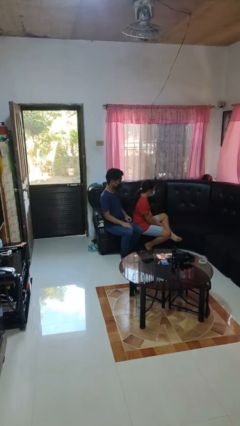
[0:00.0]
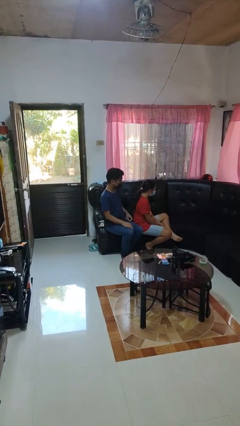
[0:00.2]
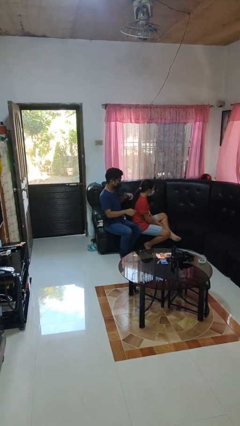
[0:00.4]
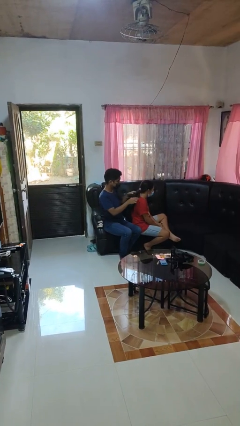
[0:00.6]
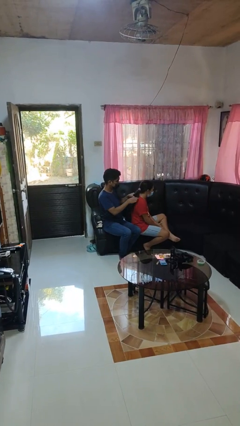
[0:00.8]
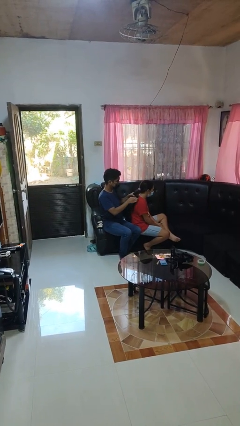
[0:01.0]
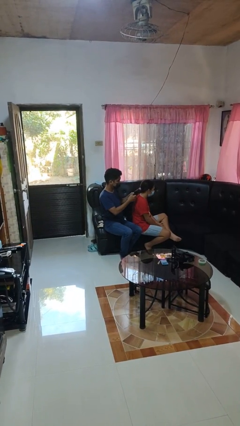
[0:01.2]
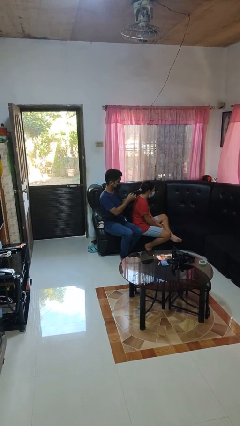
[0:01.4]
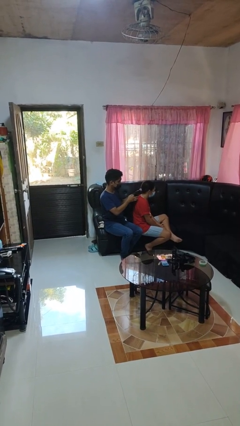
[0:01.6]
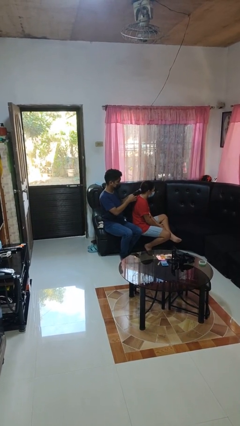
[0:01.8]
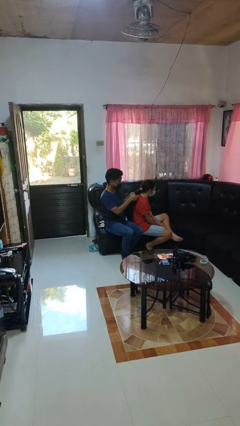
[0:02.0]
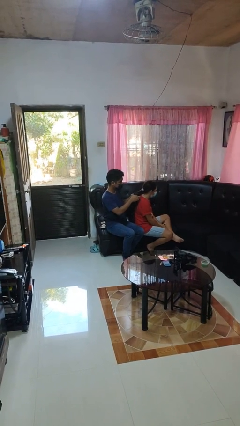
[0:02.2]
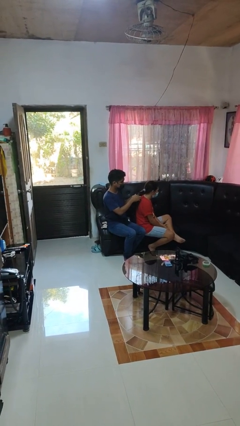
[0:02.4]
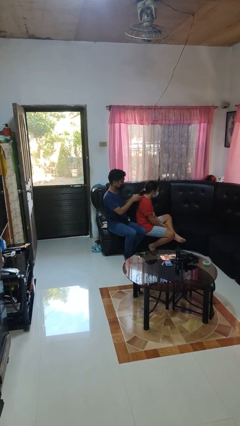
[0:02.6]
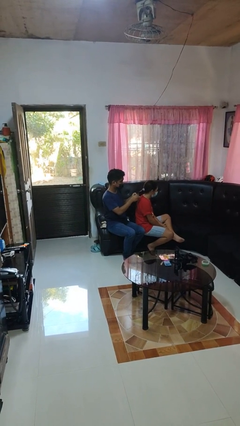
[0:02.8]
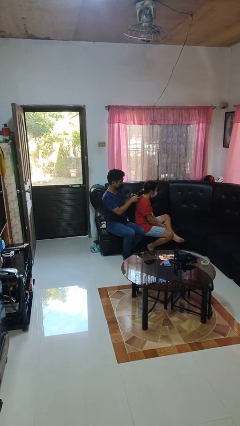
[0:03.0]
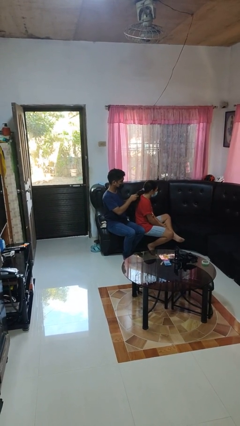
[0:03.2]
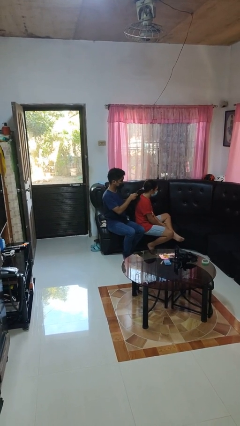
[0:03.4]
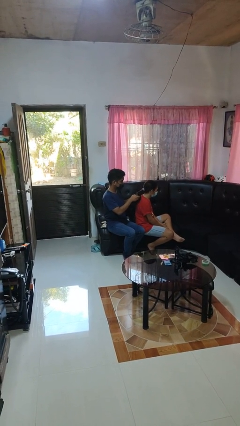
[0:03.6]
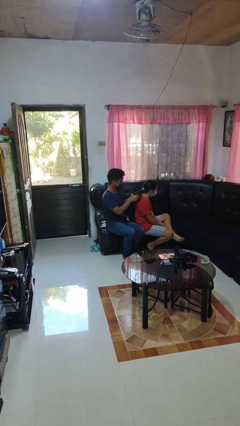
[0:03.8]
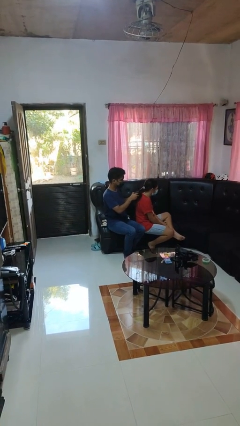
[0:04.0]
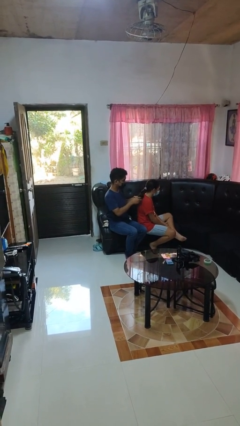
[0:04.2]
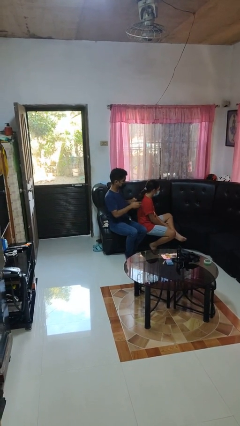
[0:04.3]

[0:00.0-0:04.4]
person braids hair of person

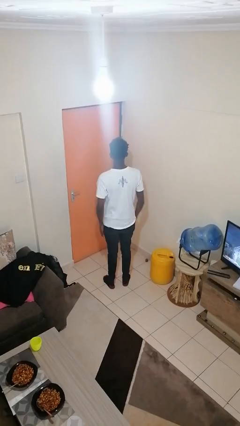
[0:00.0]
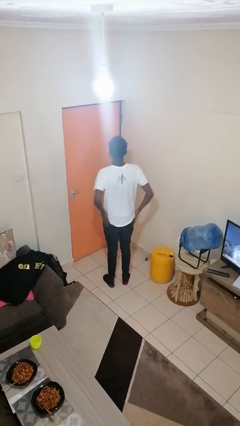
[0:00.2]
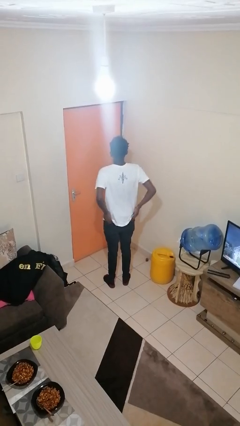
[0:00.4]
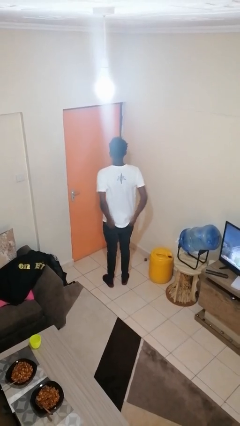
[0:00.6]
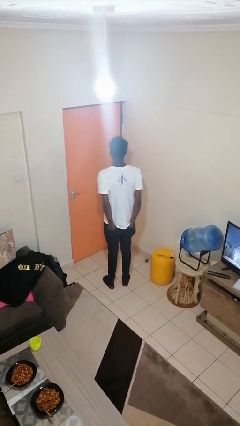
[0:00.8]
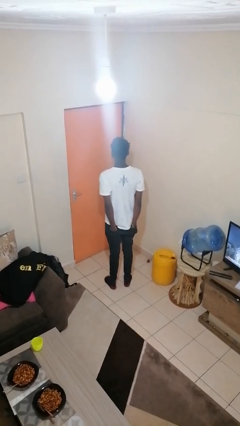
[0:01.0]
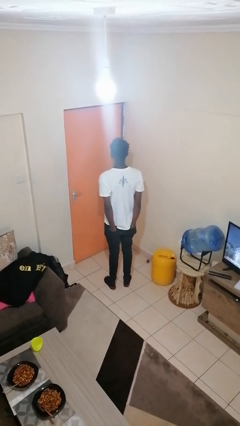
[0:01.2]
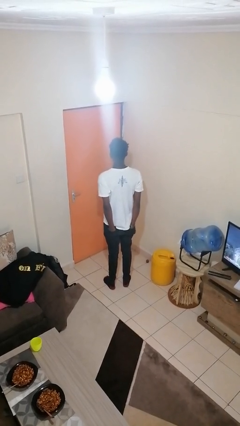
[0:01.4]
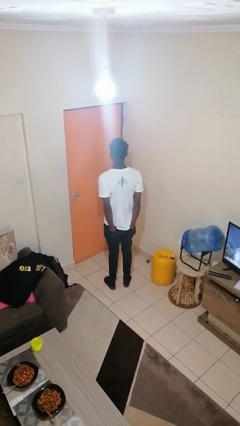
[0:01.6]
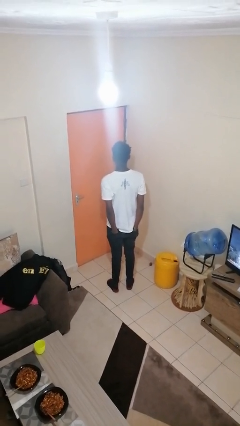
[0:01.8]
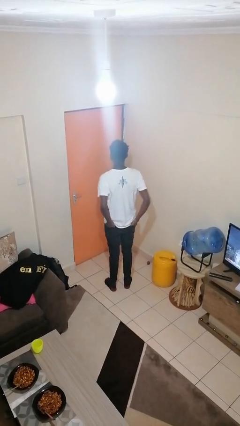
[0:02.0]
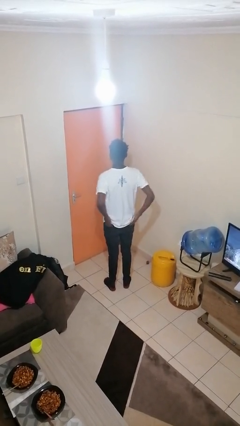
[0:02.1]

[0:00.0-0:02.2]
person puts hands in back pockets

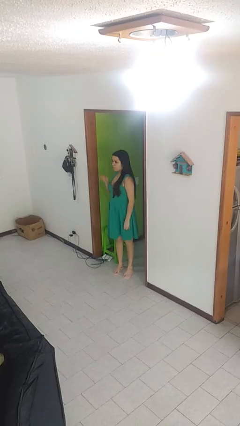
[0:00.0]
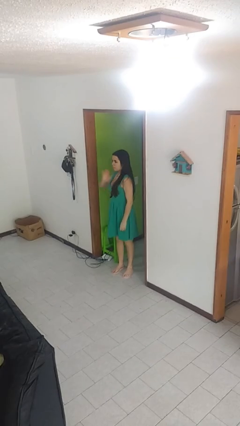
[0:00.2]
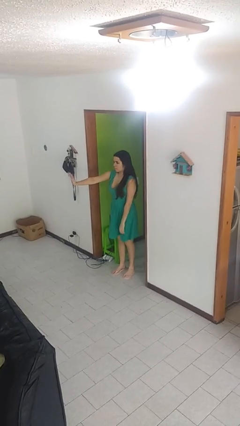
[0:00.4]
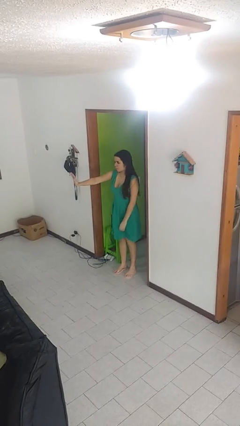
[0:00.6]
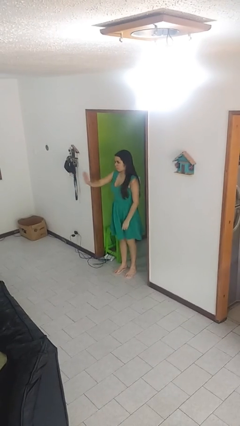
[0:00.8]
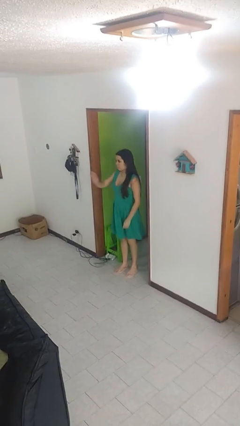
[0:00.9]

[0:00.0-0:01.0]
person gestures stop

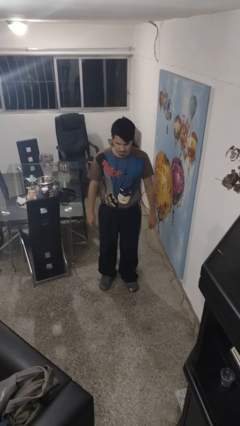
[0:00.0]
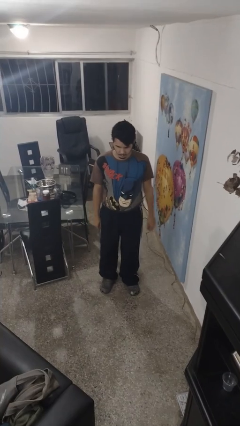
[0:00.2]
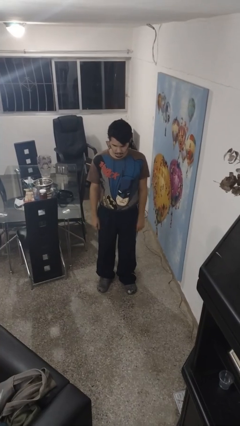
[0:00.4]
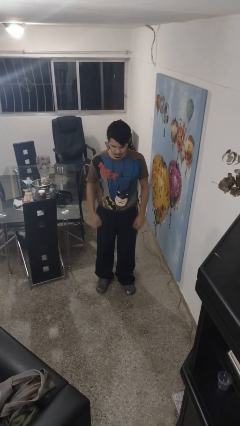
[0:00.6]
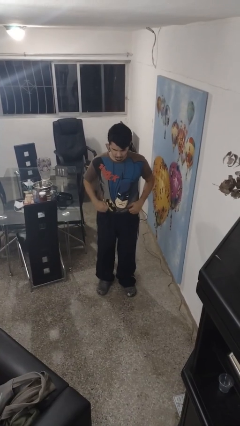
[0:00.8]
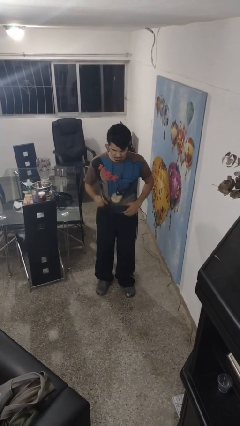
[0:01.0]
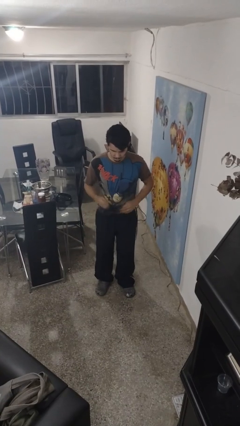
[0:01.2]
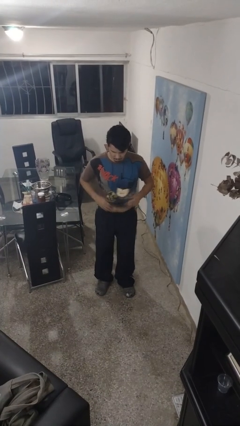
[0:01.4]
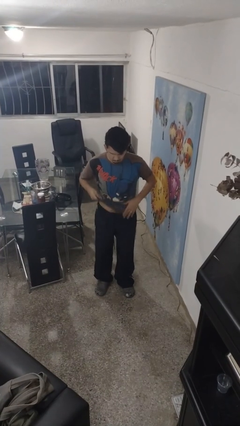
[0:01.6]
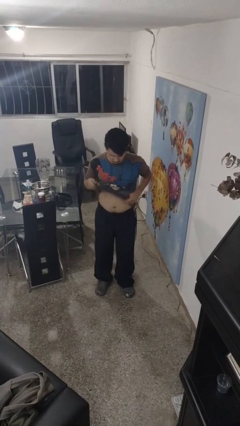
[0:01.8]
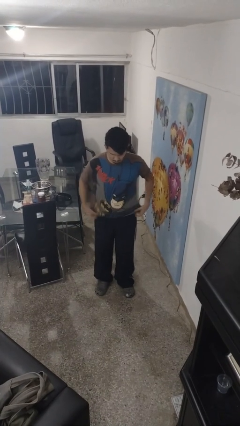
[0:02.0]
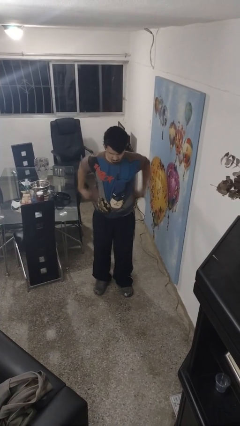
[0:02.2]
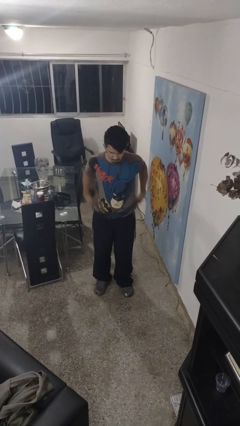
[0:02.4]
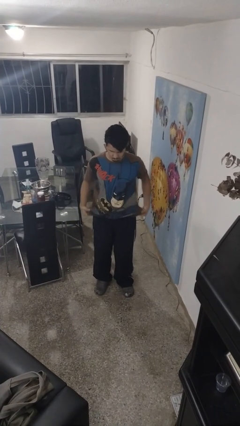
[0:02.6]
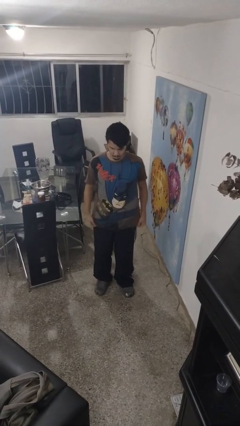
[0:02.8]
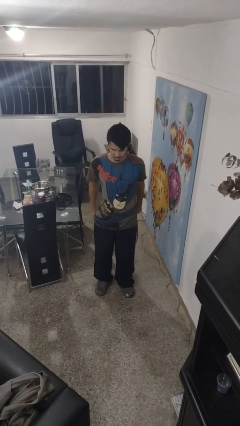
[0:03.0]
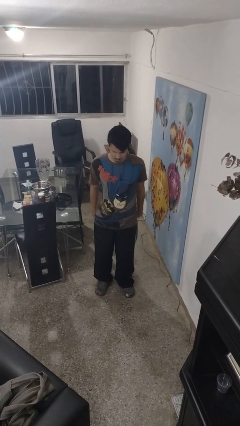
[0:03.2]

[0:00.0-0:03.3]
person untucks shirt

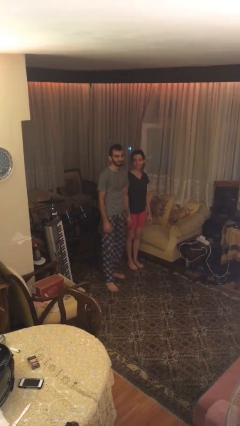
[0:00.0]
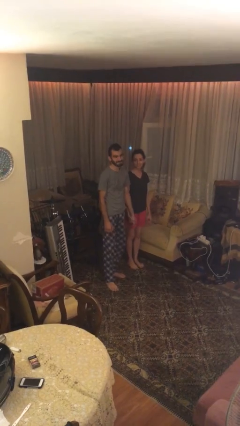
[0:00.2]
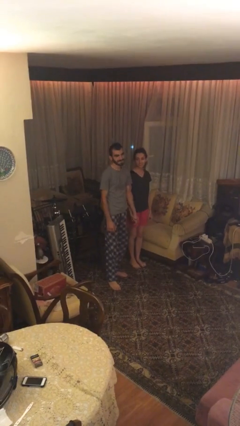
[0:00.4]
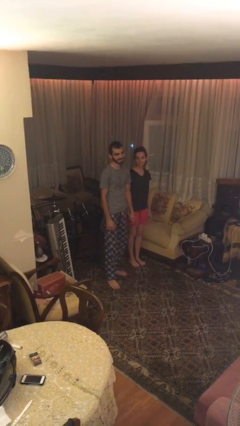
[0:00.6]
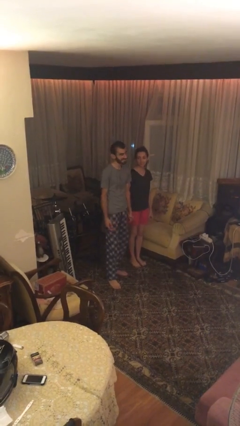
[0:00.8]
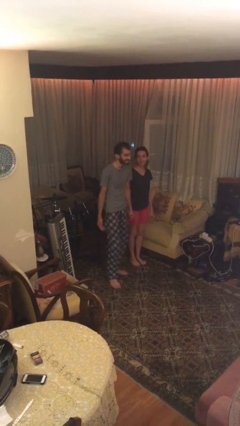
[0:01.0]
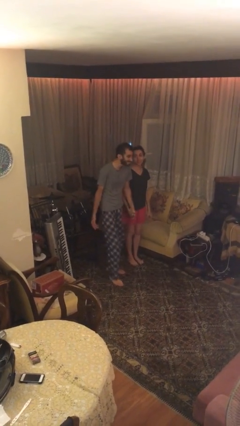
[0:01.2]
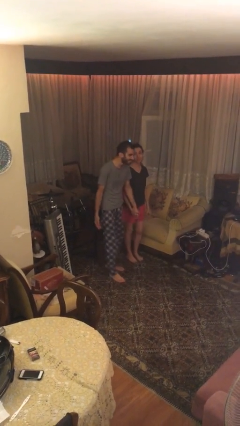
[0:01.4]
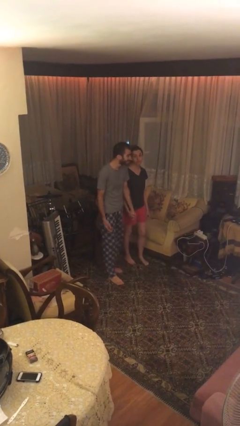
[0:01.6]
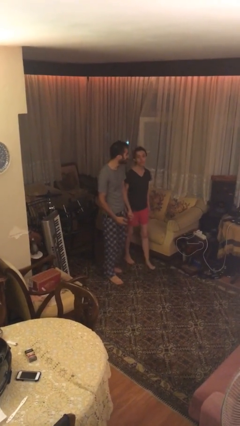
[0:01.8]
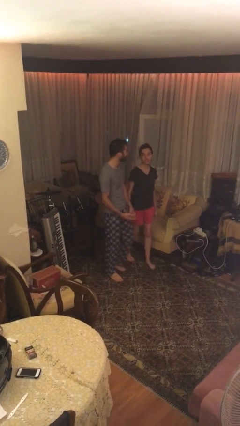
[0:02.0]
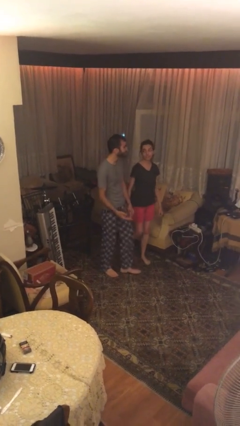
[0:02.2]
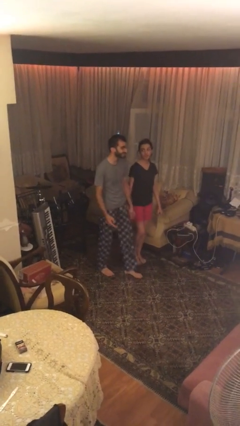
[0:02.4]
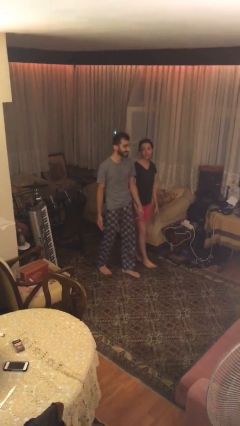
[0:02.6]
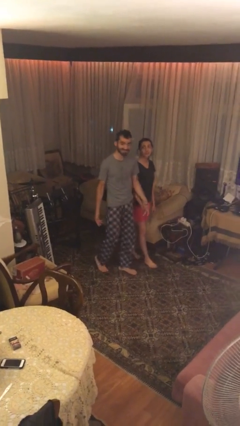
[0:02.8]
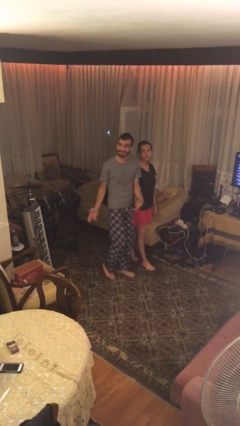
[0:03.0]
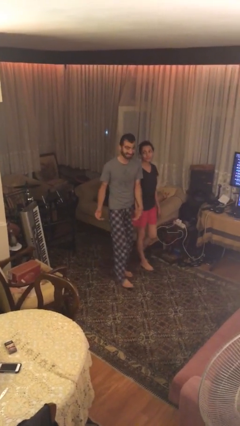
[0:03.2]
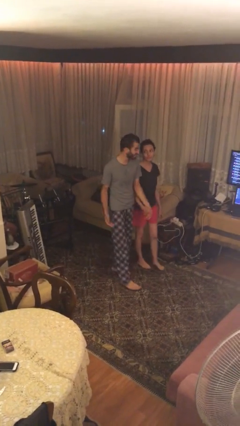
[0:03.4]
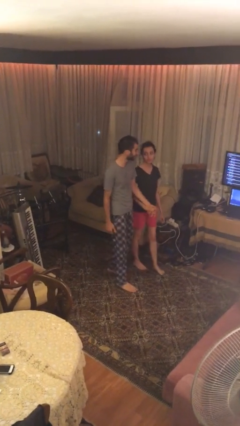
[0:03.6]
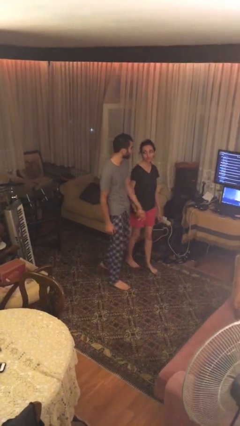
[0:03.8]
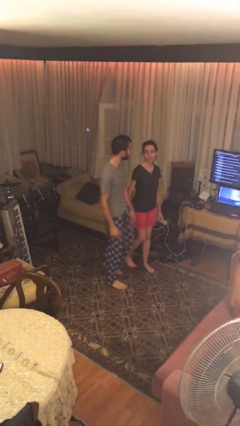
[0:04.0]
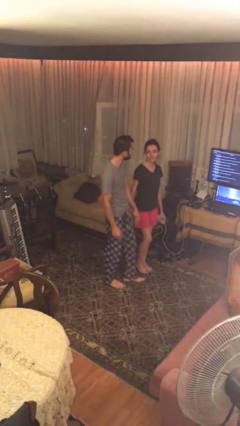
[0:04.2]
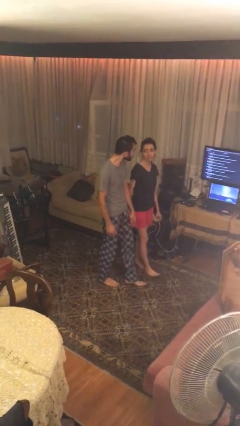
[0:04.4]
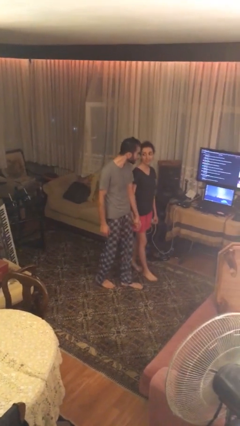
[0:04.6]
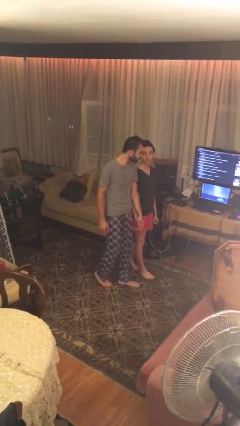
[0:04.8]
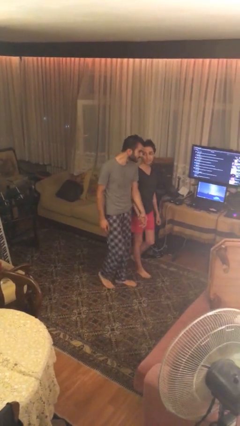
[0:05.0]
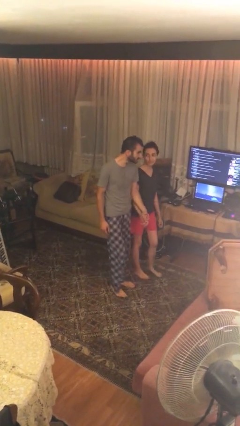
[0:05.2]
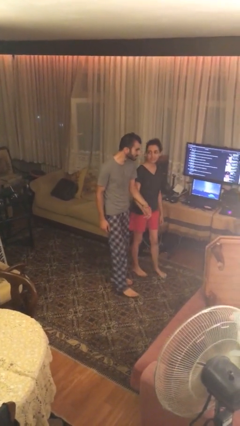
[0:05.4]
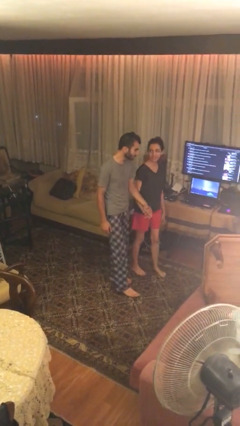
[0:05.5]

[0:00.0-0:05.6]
person holds hand

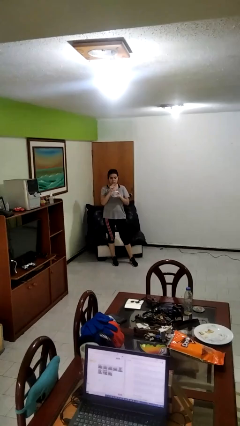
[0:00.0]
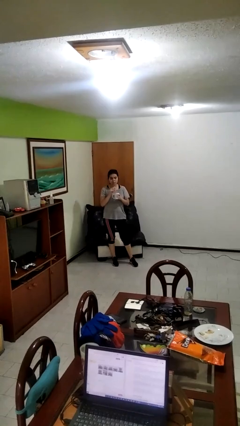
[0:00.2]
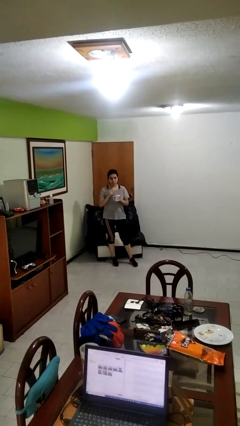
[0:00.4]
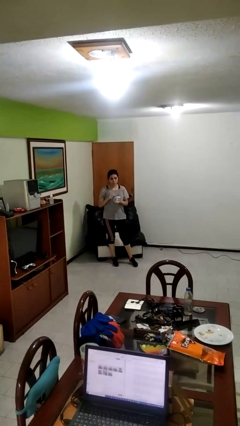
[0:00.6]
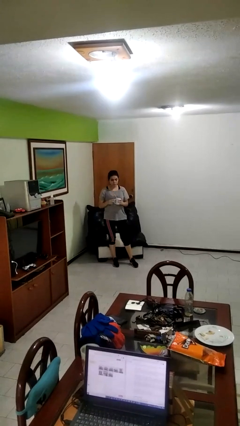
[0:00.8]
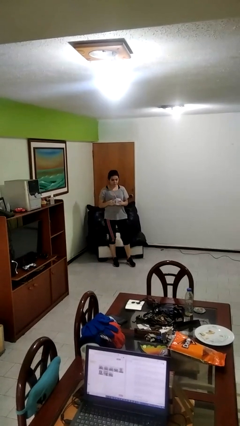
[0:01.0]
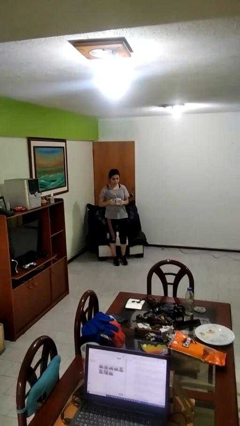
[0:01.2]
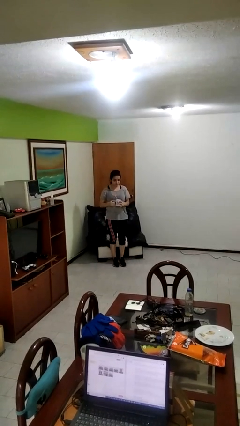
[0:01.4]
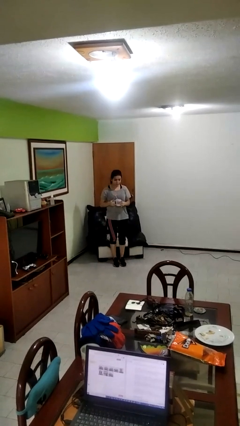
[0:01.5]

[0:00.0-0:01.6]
person drinks from straw
